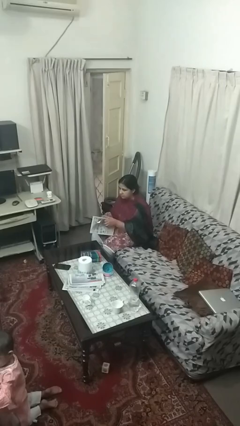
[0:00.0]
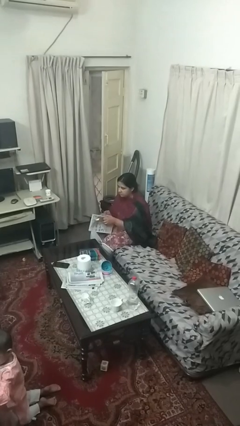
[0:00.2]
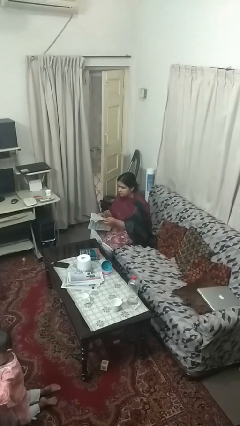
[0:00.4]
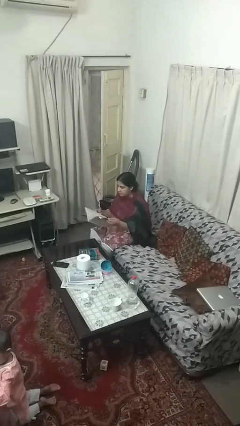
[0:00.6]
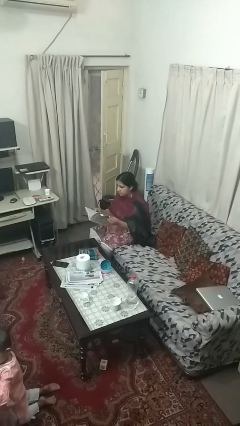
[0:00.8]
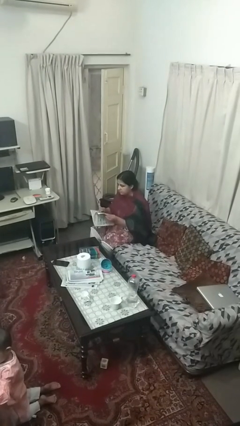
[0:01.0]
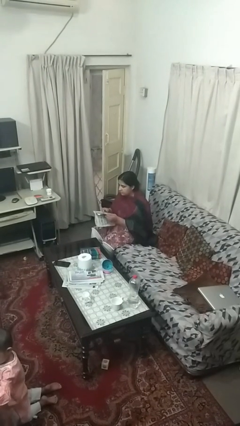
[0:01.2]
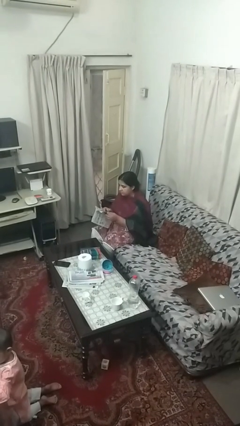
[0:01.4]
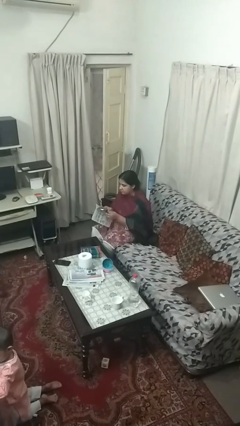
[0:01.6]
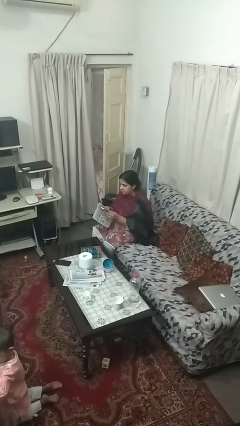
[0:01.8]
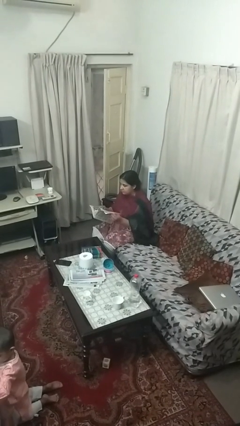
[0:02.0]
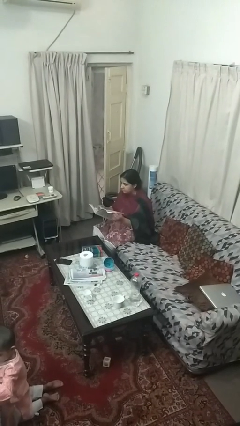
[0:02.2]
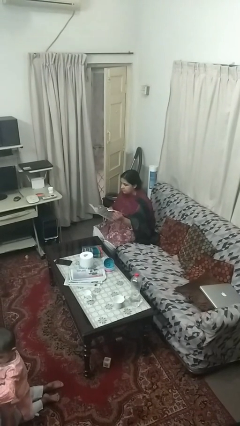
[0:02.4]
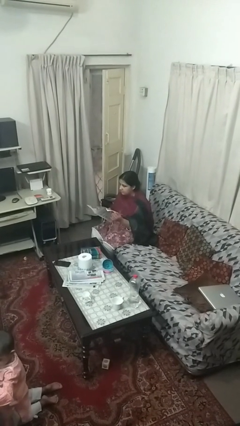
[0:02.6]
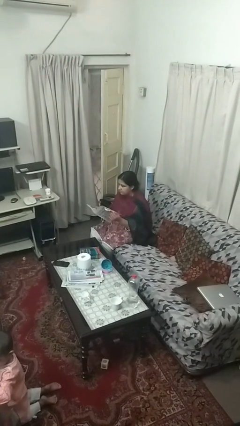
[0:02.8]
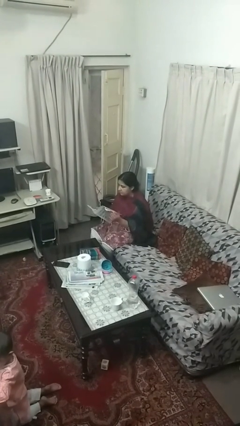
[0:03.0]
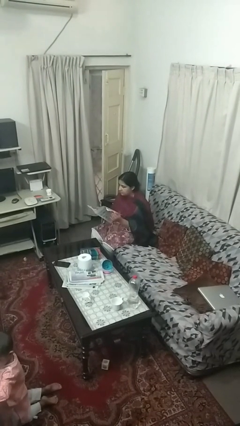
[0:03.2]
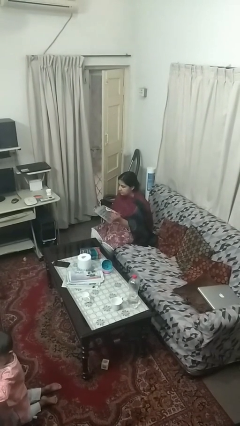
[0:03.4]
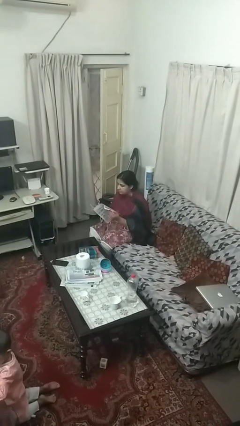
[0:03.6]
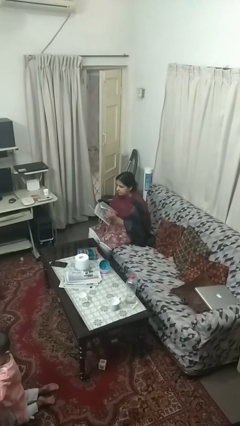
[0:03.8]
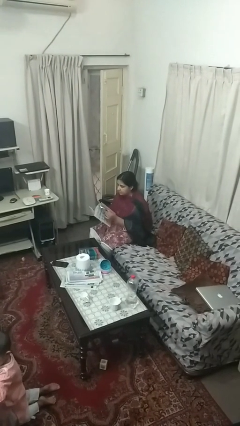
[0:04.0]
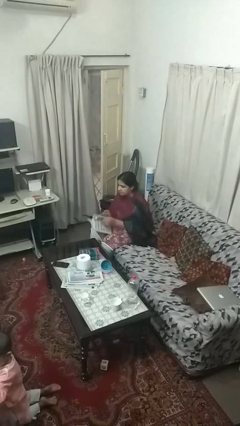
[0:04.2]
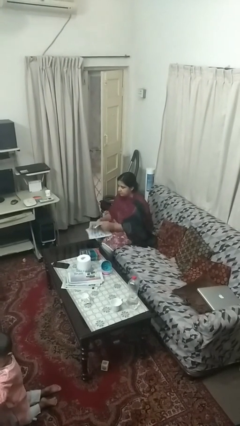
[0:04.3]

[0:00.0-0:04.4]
person reads magazine

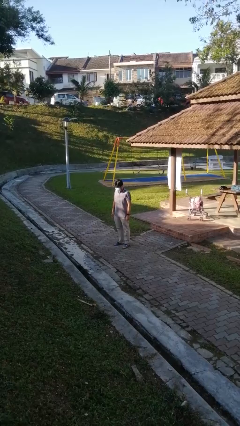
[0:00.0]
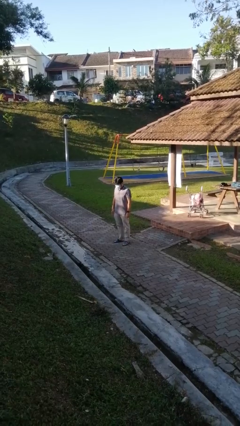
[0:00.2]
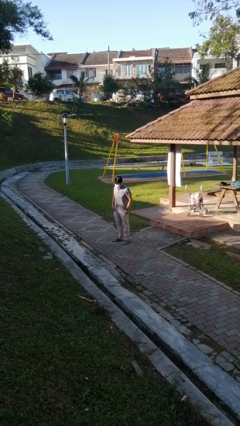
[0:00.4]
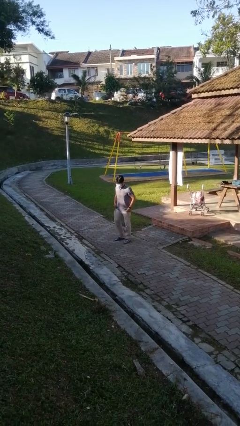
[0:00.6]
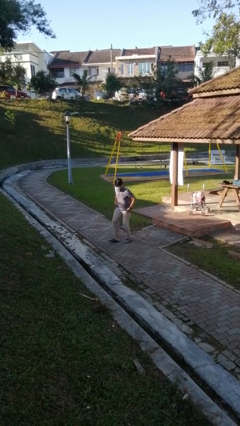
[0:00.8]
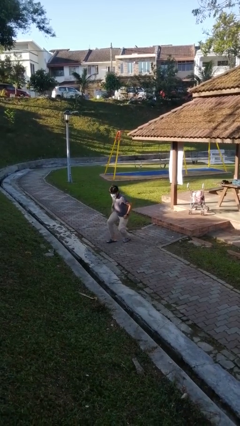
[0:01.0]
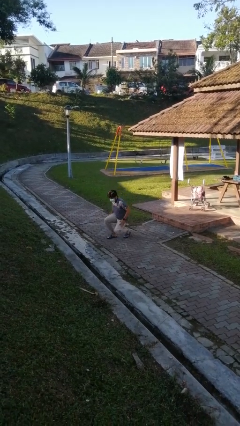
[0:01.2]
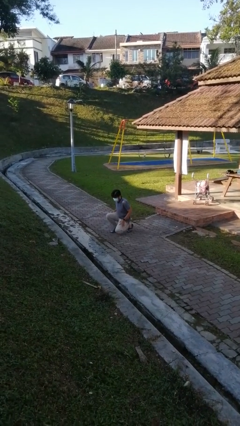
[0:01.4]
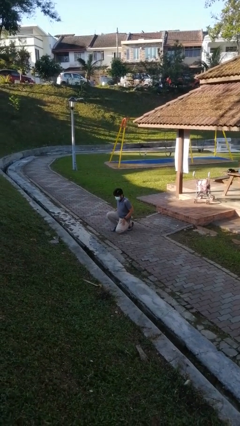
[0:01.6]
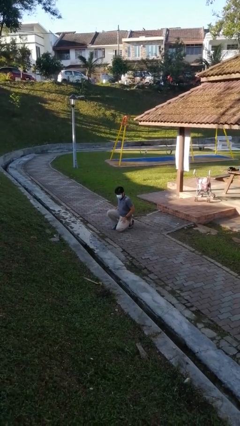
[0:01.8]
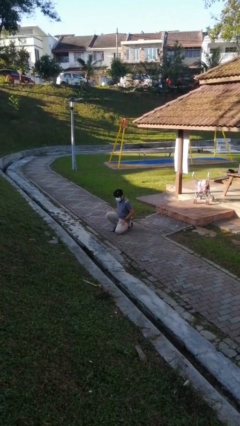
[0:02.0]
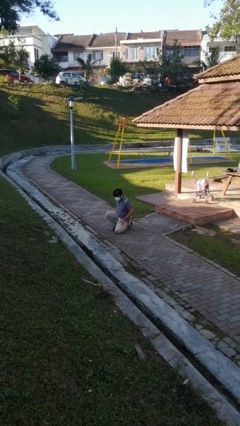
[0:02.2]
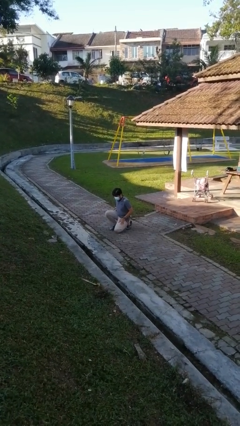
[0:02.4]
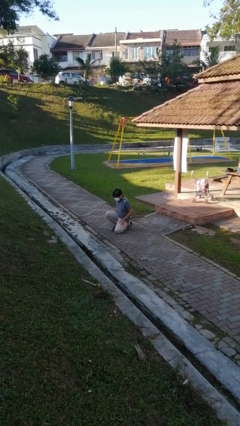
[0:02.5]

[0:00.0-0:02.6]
person kneels

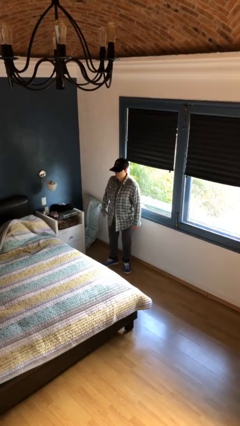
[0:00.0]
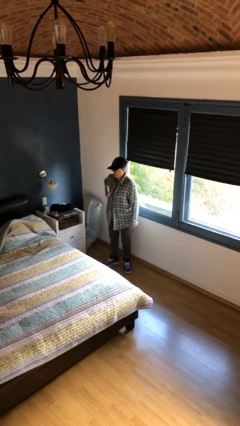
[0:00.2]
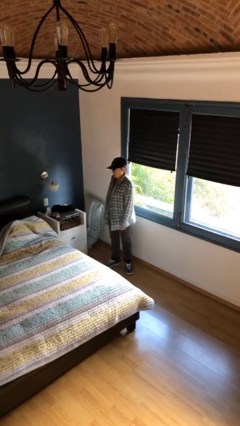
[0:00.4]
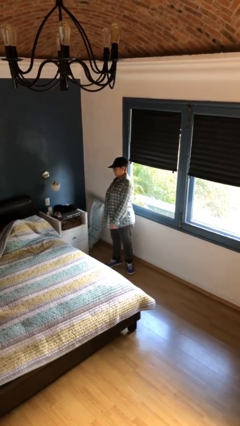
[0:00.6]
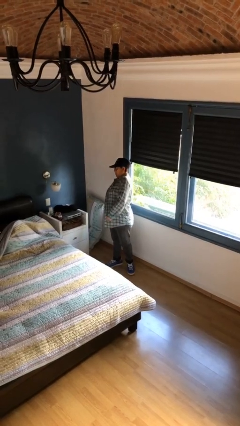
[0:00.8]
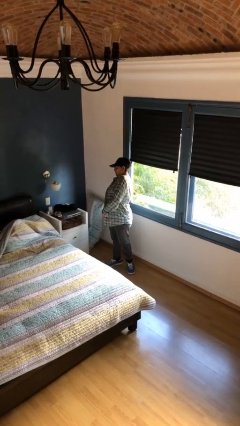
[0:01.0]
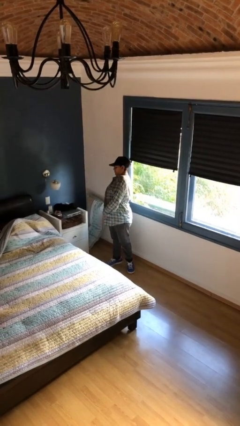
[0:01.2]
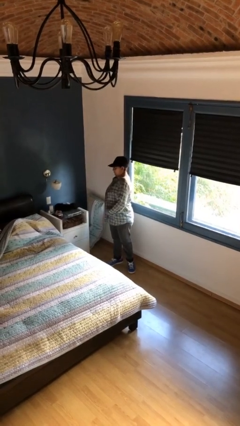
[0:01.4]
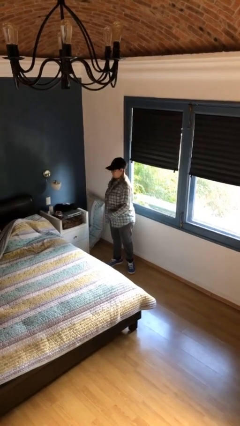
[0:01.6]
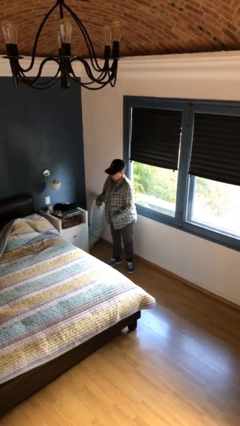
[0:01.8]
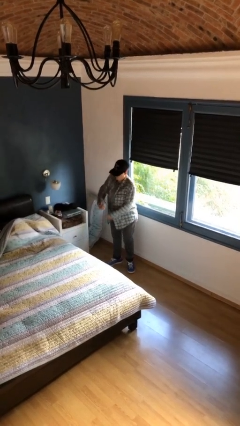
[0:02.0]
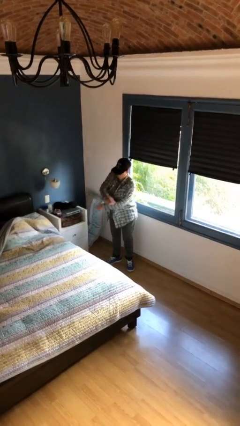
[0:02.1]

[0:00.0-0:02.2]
person stretches back

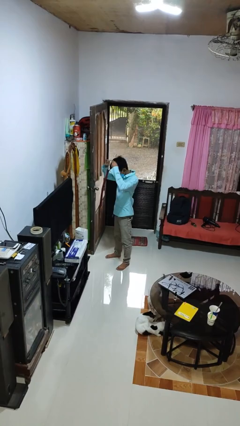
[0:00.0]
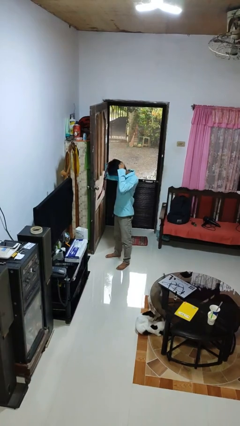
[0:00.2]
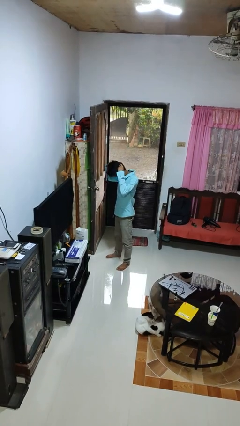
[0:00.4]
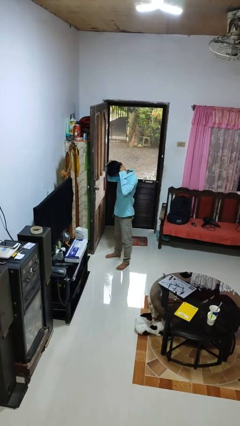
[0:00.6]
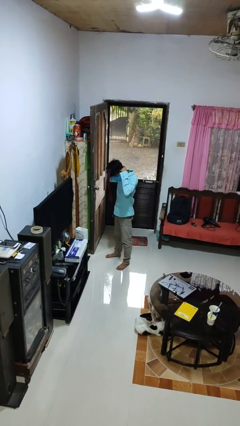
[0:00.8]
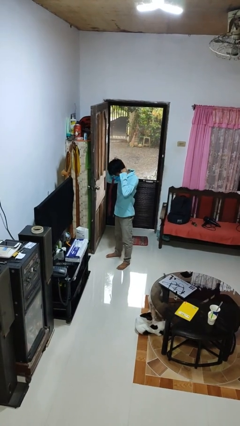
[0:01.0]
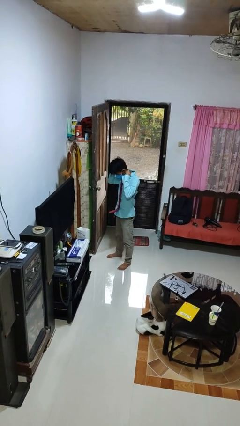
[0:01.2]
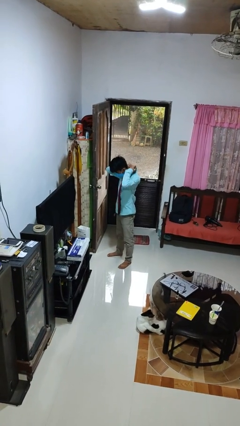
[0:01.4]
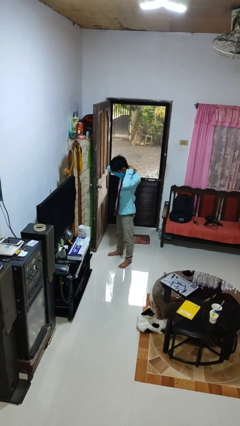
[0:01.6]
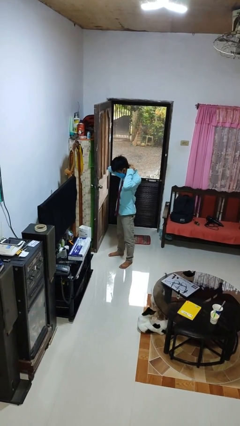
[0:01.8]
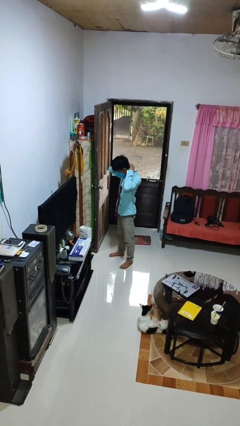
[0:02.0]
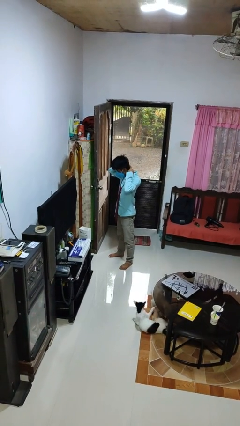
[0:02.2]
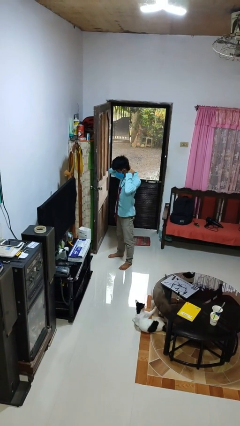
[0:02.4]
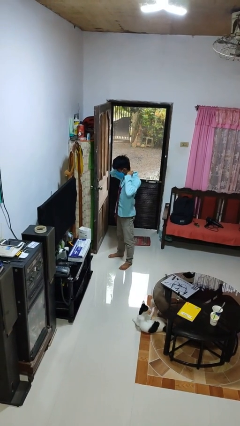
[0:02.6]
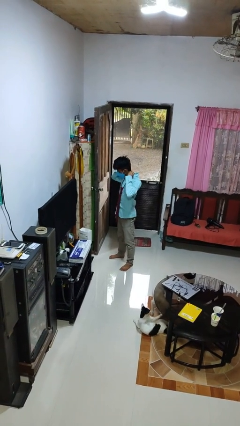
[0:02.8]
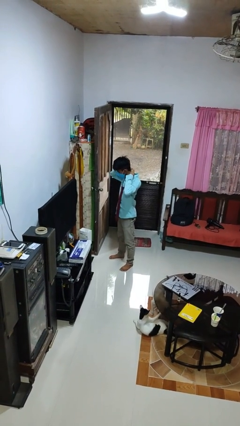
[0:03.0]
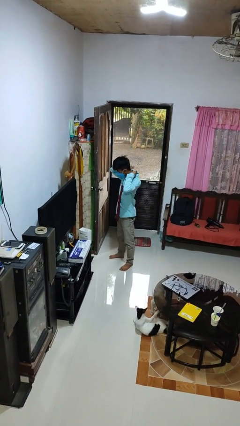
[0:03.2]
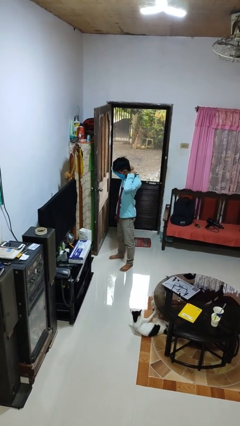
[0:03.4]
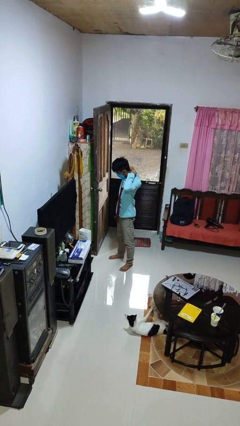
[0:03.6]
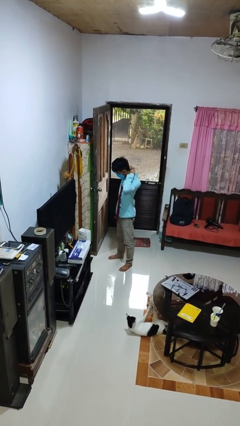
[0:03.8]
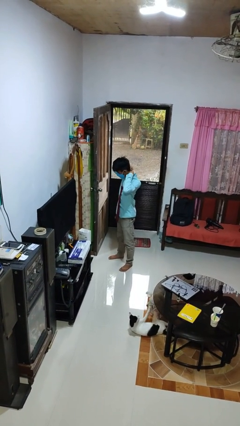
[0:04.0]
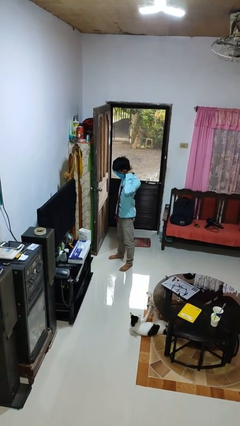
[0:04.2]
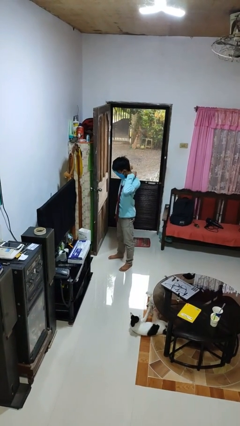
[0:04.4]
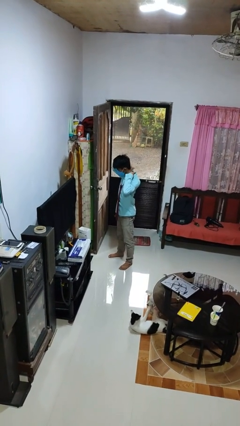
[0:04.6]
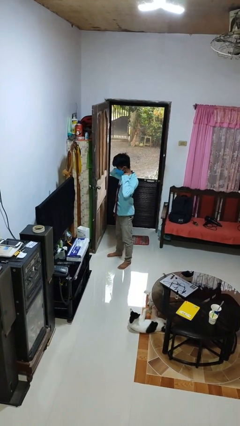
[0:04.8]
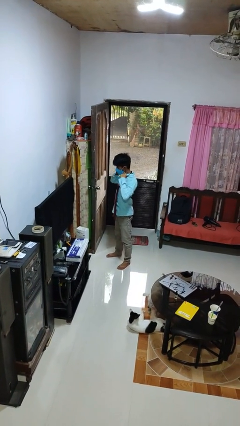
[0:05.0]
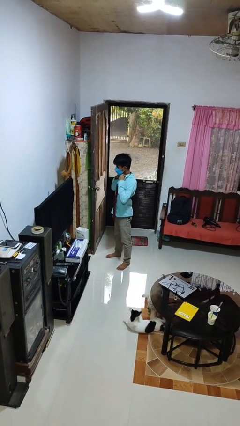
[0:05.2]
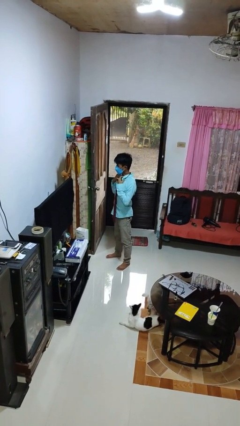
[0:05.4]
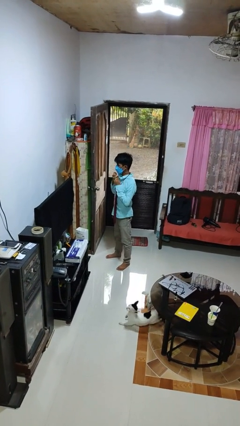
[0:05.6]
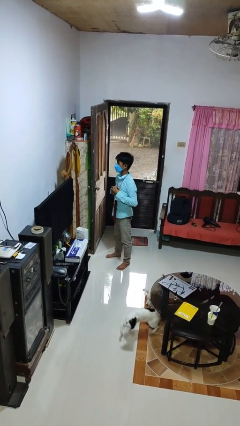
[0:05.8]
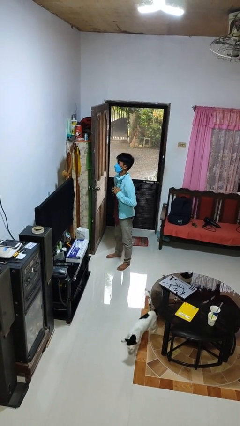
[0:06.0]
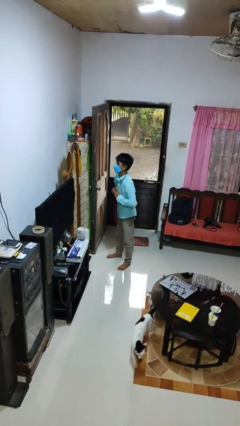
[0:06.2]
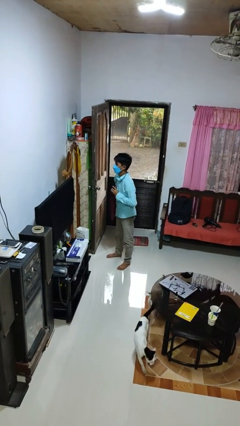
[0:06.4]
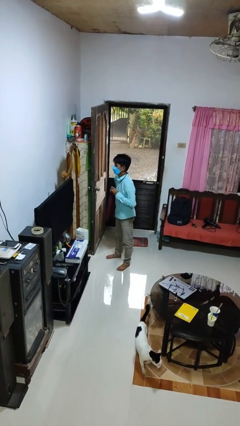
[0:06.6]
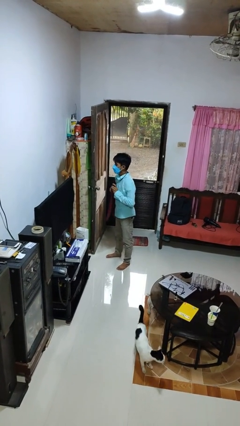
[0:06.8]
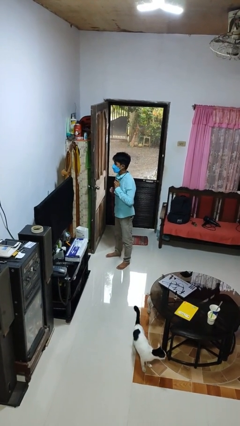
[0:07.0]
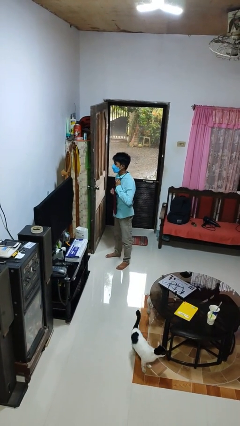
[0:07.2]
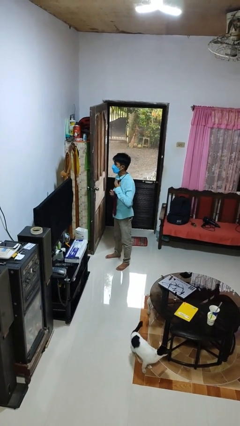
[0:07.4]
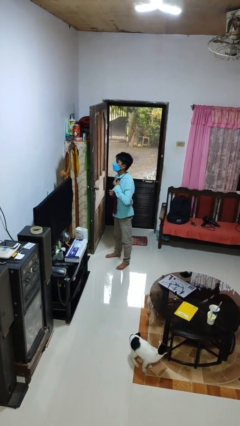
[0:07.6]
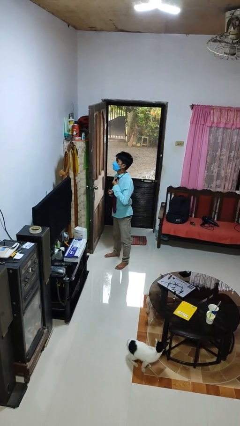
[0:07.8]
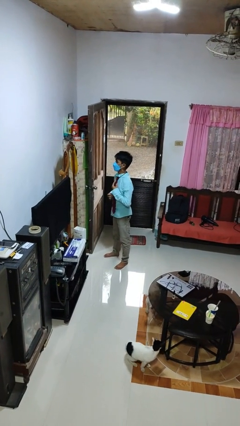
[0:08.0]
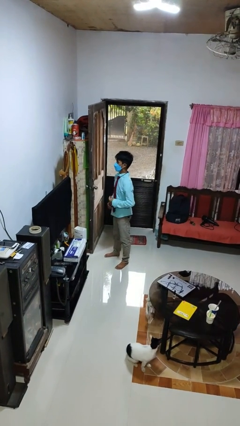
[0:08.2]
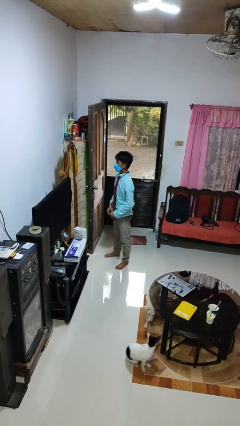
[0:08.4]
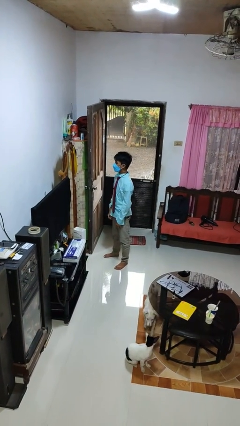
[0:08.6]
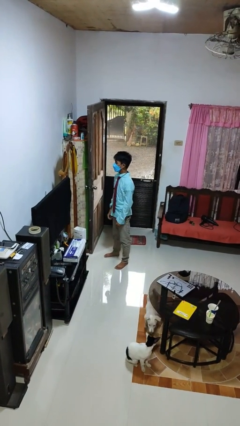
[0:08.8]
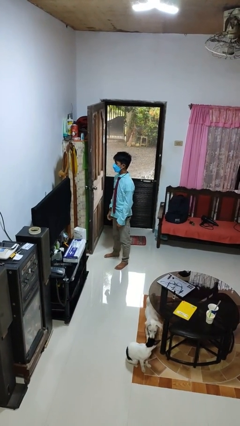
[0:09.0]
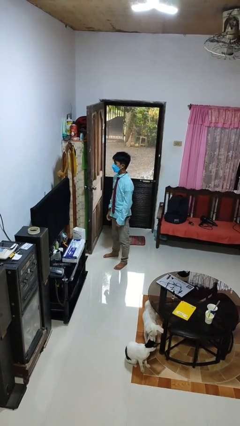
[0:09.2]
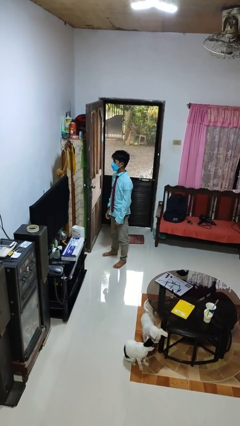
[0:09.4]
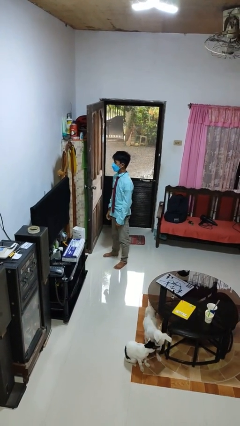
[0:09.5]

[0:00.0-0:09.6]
person puts on necktie
